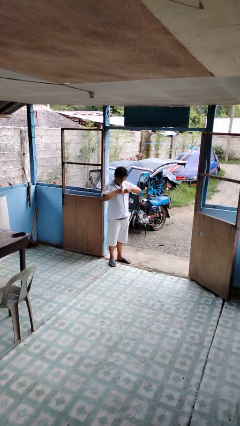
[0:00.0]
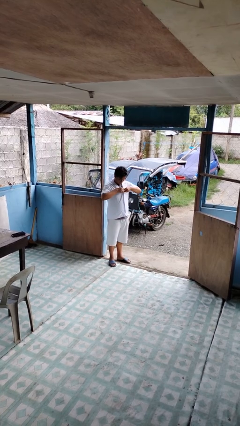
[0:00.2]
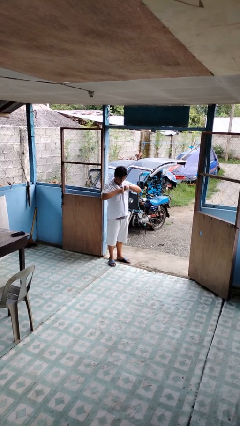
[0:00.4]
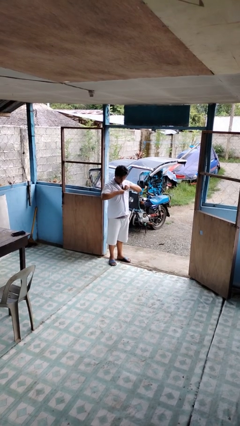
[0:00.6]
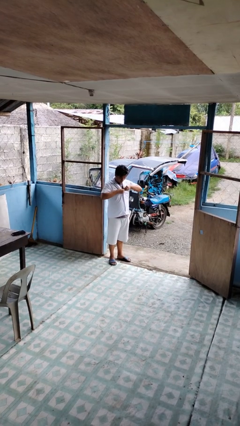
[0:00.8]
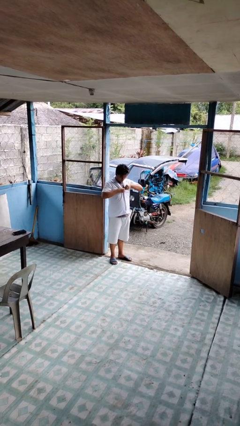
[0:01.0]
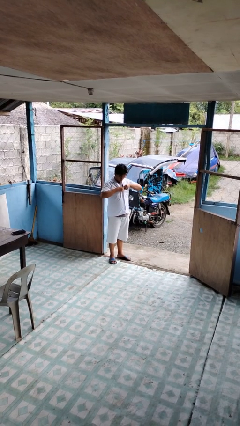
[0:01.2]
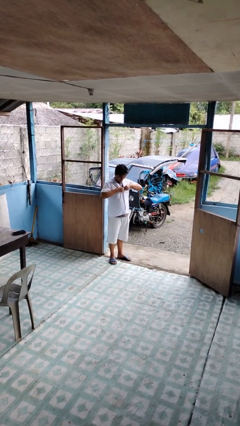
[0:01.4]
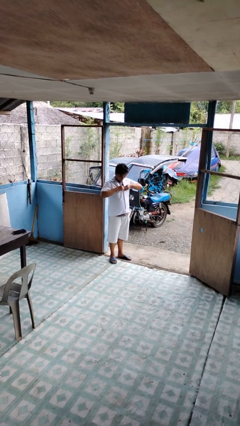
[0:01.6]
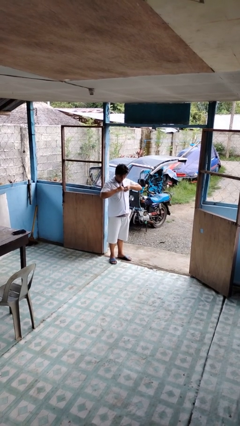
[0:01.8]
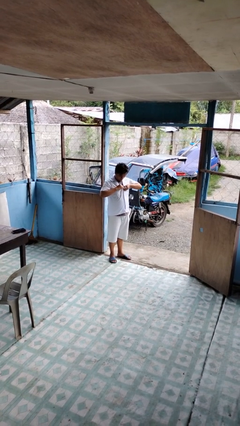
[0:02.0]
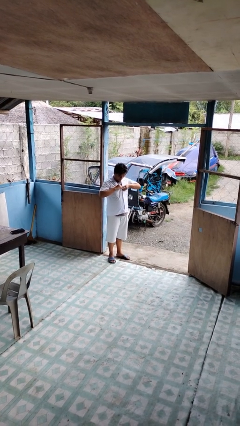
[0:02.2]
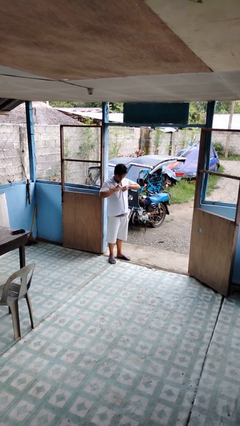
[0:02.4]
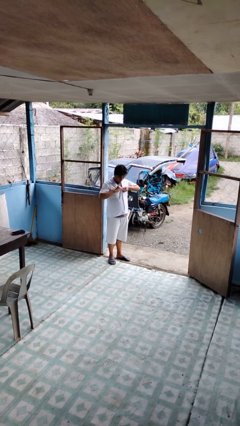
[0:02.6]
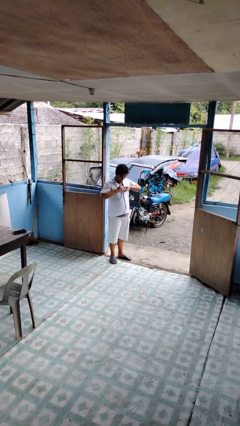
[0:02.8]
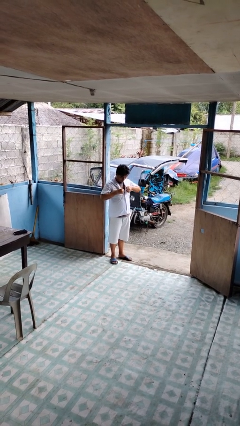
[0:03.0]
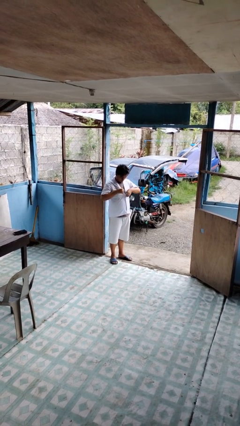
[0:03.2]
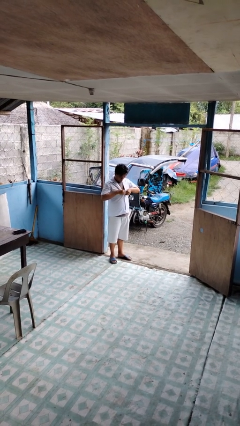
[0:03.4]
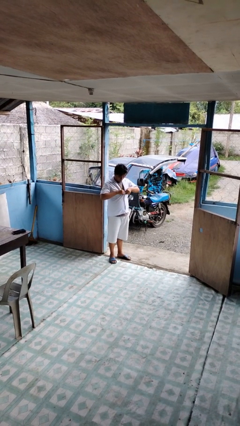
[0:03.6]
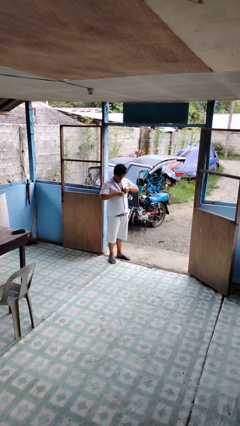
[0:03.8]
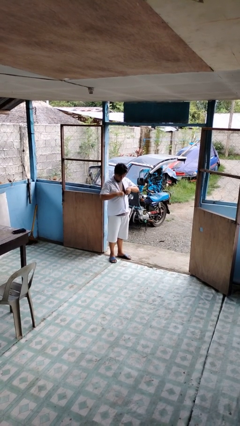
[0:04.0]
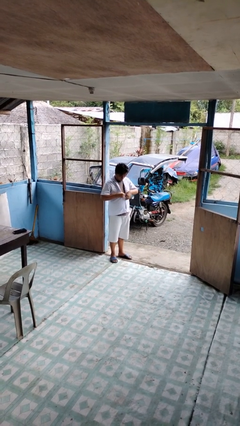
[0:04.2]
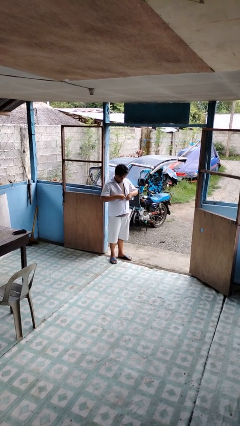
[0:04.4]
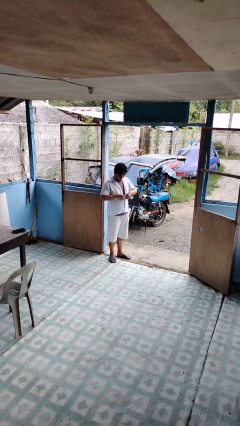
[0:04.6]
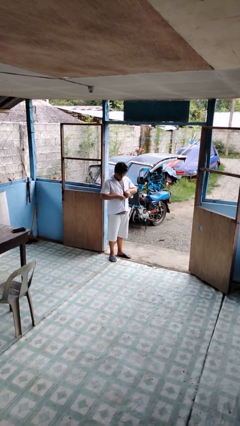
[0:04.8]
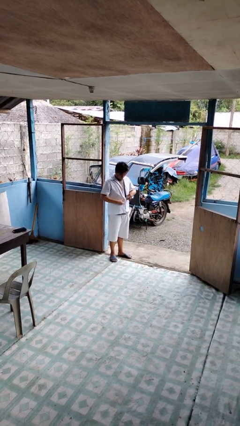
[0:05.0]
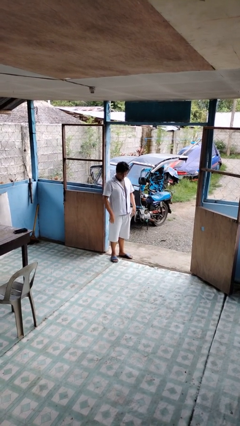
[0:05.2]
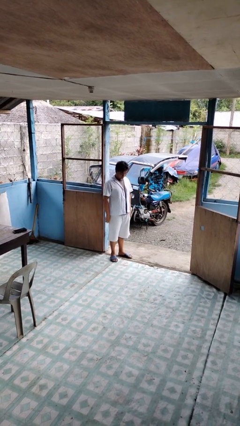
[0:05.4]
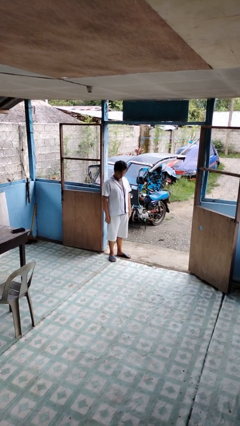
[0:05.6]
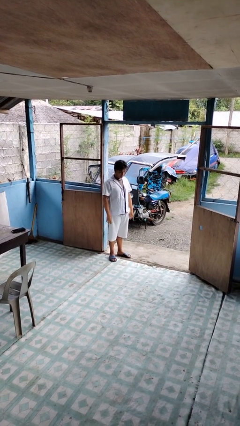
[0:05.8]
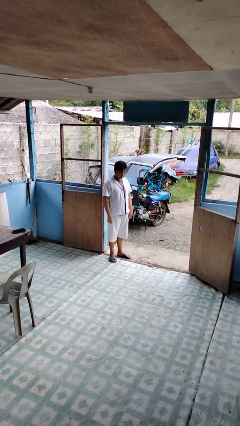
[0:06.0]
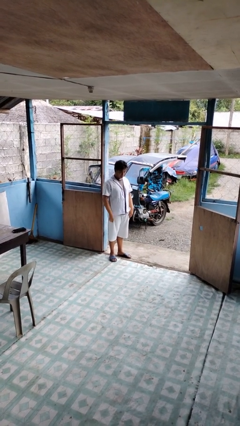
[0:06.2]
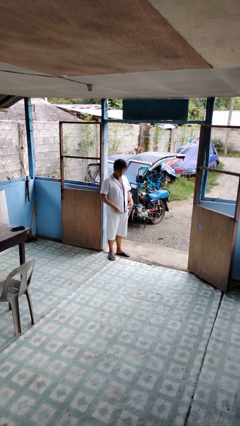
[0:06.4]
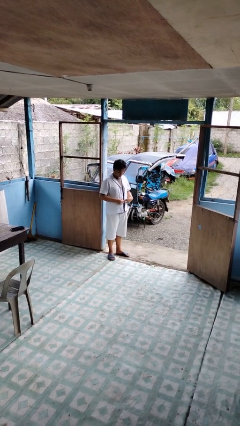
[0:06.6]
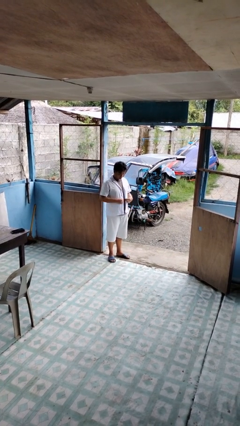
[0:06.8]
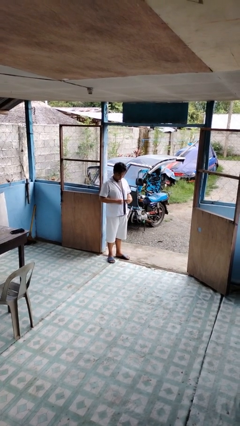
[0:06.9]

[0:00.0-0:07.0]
person unbuttons shirt

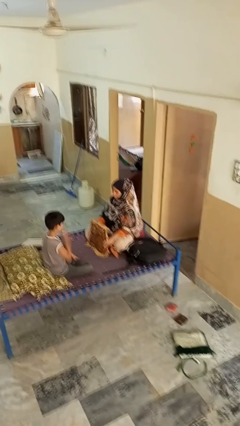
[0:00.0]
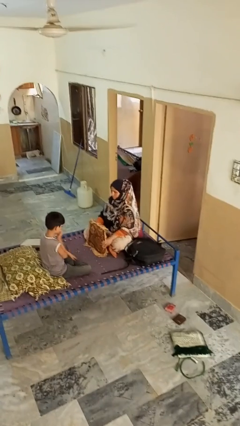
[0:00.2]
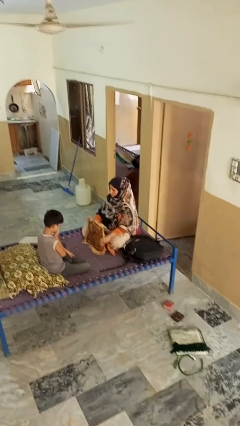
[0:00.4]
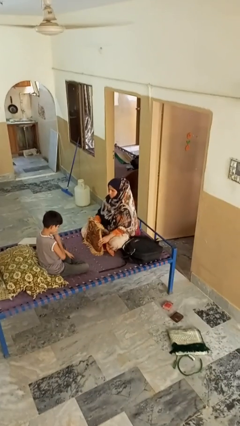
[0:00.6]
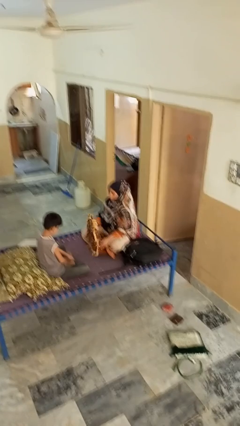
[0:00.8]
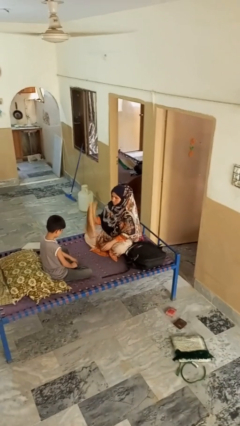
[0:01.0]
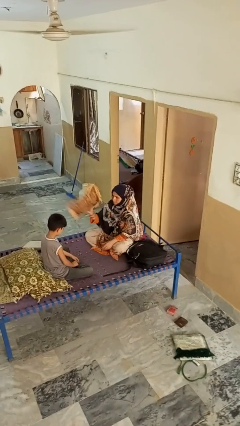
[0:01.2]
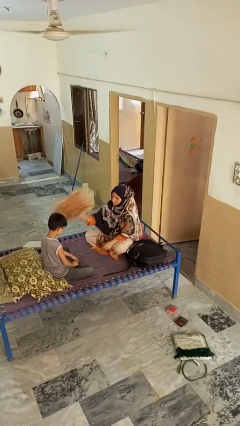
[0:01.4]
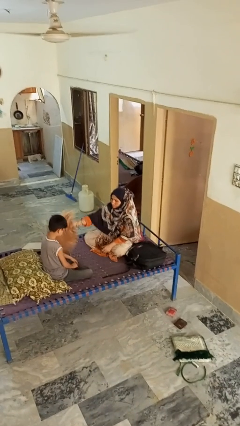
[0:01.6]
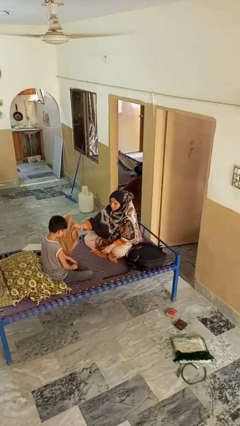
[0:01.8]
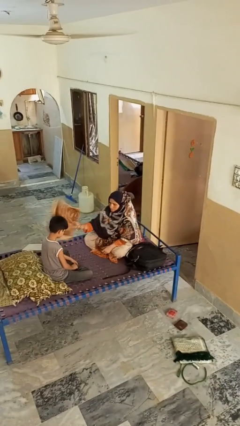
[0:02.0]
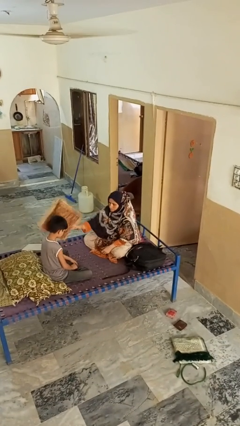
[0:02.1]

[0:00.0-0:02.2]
person hits person with pillow

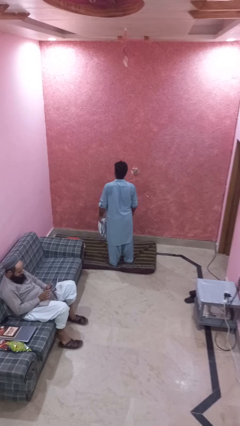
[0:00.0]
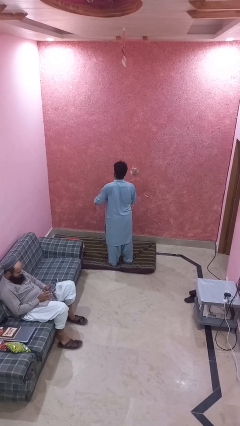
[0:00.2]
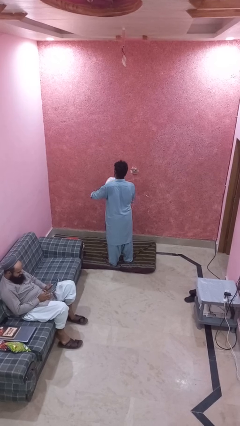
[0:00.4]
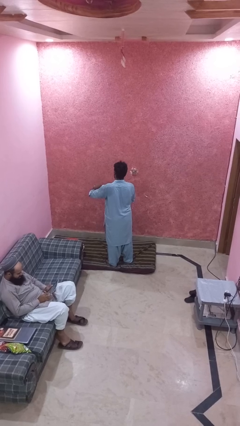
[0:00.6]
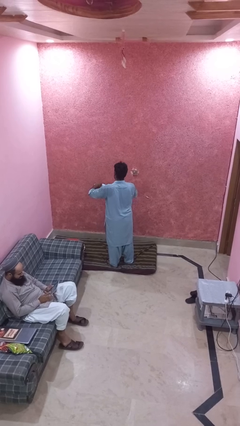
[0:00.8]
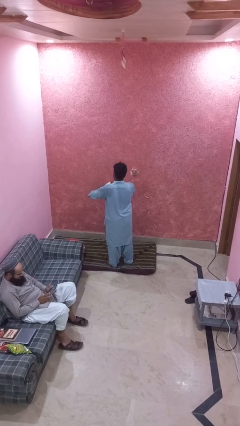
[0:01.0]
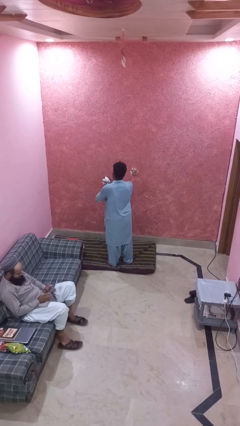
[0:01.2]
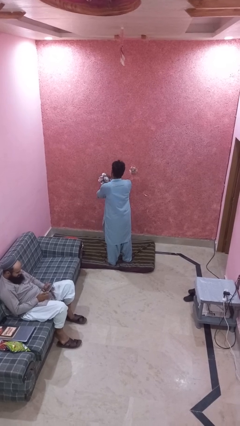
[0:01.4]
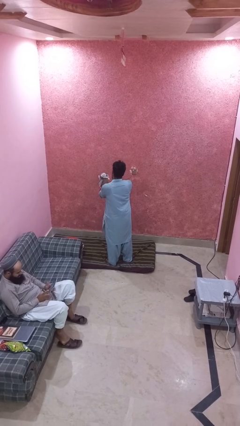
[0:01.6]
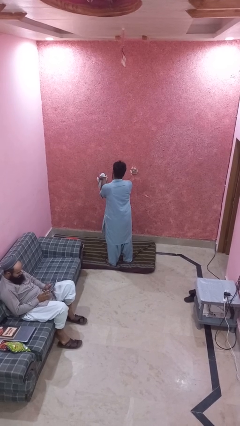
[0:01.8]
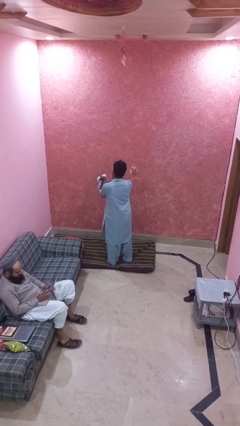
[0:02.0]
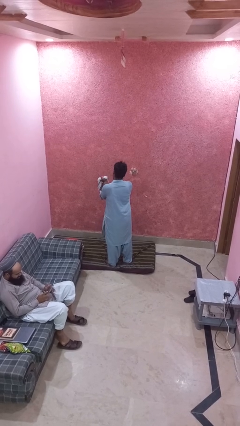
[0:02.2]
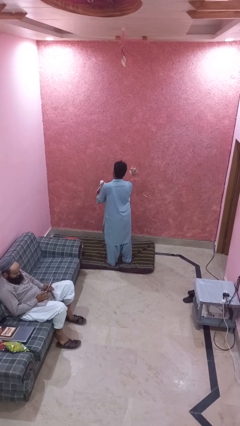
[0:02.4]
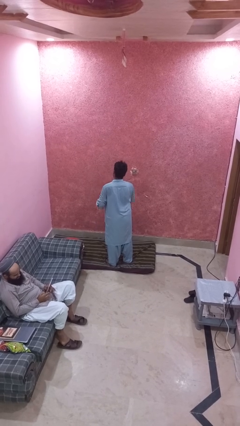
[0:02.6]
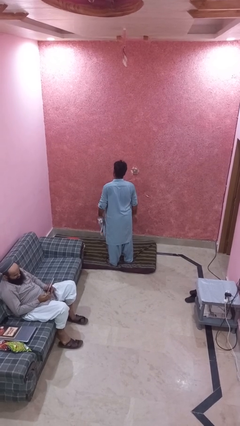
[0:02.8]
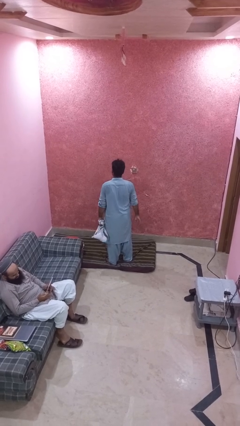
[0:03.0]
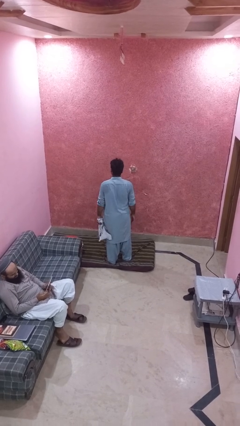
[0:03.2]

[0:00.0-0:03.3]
person squeezes object

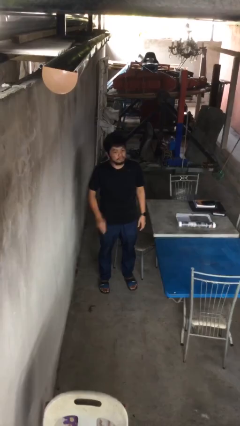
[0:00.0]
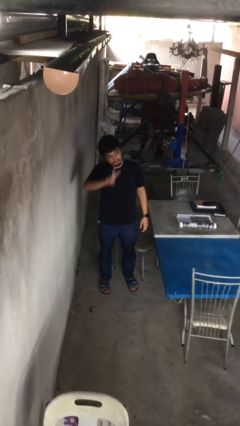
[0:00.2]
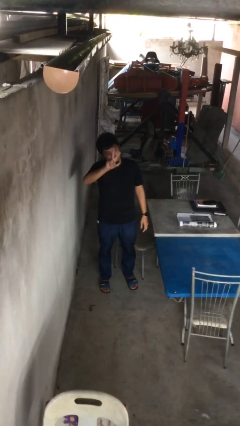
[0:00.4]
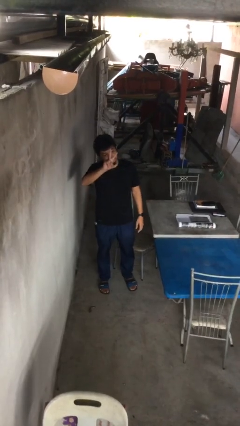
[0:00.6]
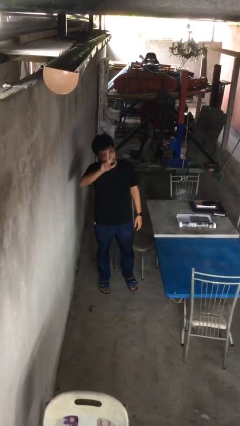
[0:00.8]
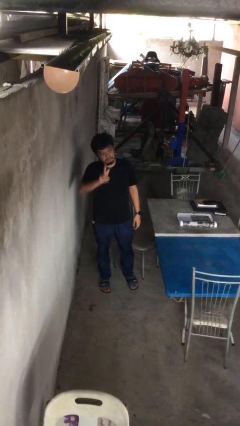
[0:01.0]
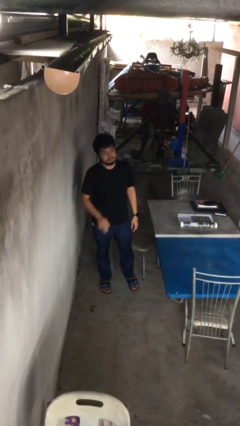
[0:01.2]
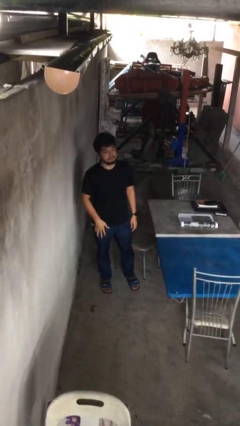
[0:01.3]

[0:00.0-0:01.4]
person gestures peace

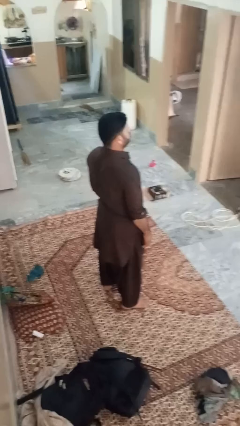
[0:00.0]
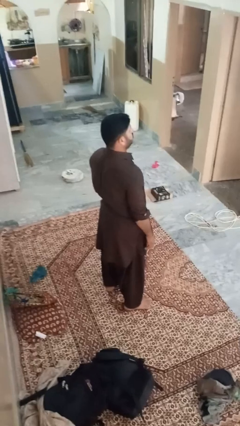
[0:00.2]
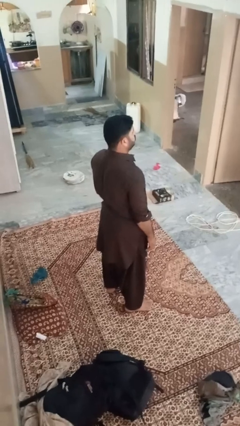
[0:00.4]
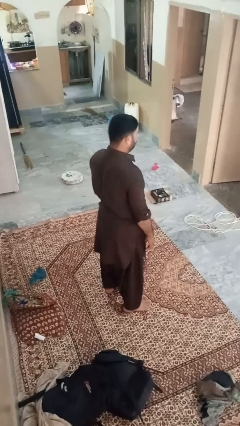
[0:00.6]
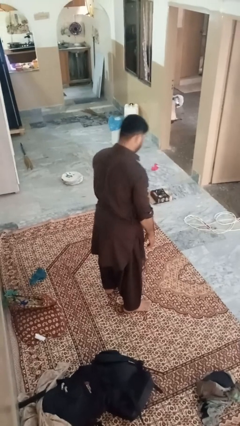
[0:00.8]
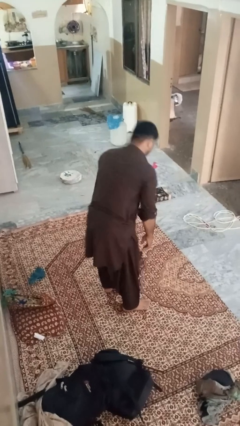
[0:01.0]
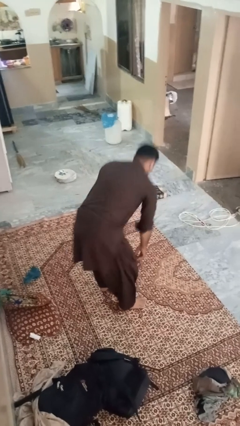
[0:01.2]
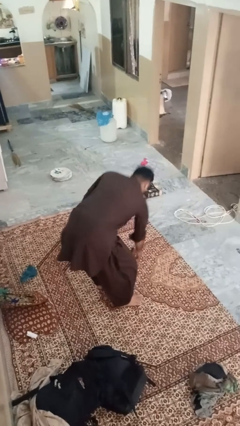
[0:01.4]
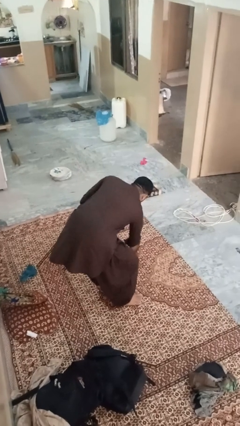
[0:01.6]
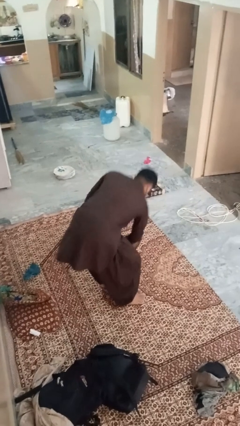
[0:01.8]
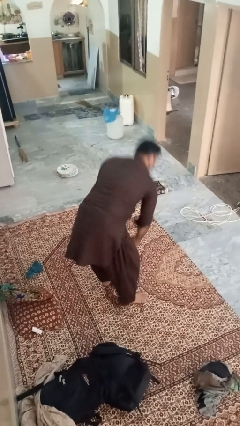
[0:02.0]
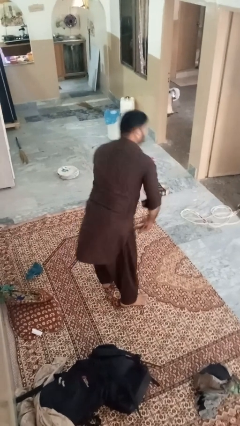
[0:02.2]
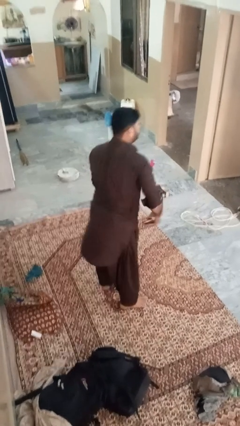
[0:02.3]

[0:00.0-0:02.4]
person picks up object from floor

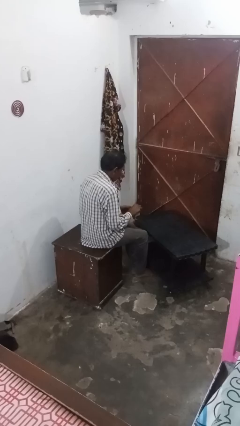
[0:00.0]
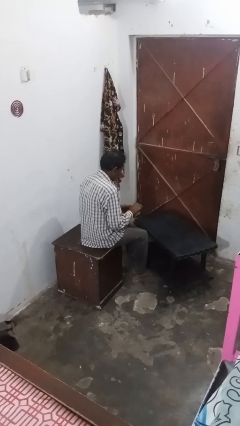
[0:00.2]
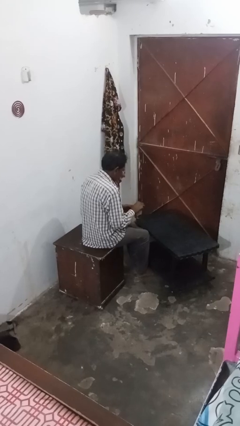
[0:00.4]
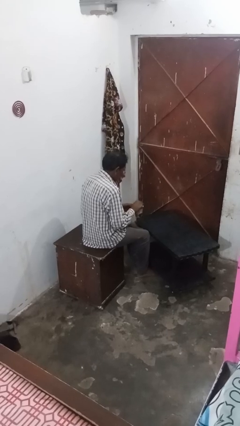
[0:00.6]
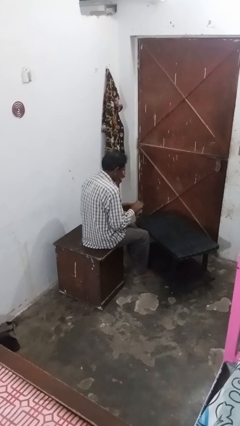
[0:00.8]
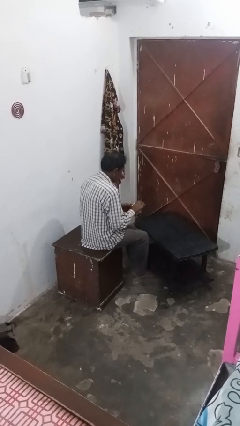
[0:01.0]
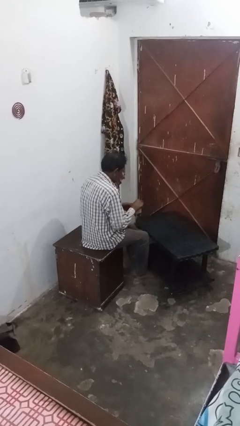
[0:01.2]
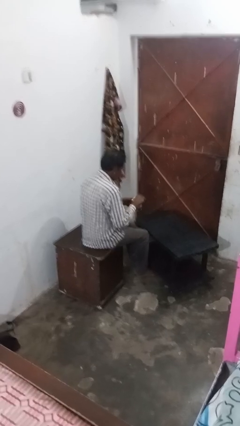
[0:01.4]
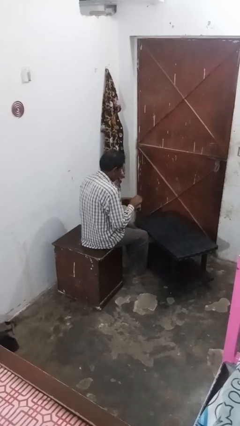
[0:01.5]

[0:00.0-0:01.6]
person stirs mug
